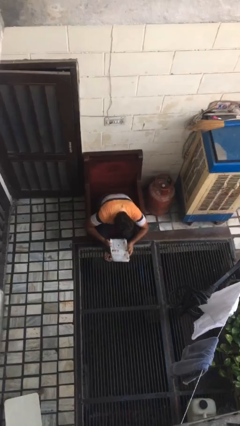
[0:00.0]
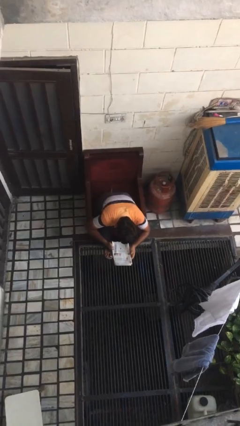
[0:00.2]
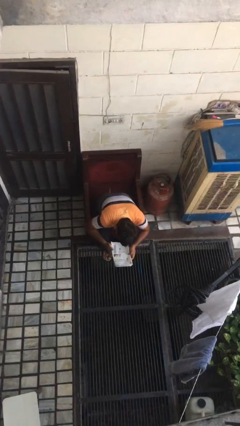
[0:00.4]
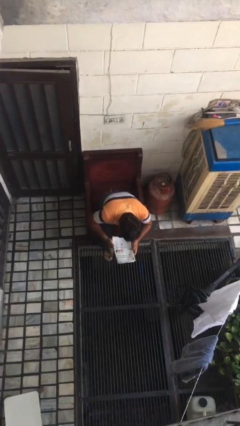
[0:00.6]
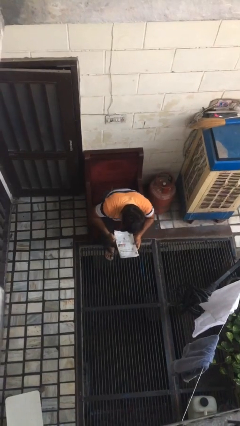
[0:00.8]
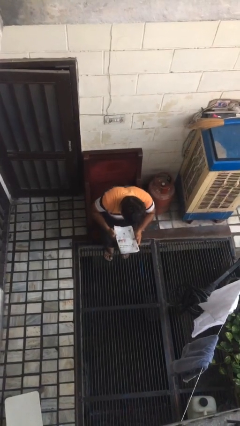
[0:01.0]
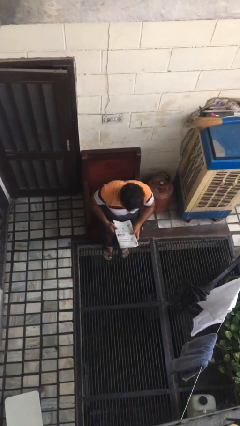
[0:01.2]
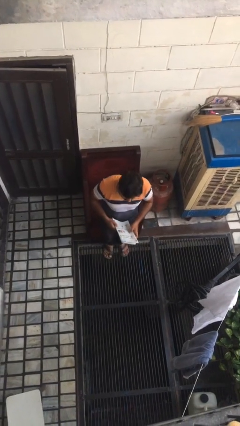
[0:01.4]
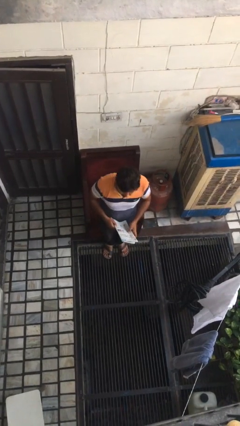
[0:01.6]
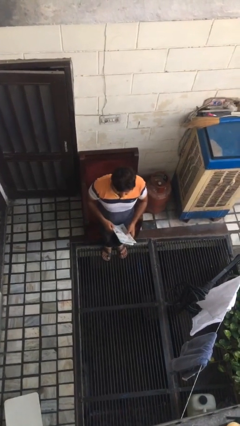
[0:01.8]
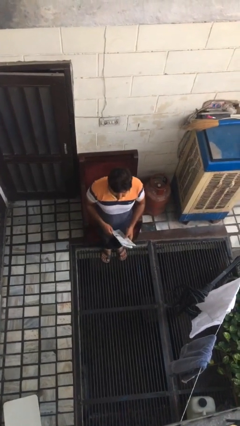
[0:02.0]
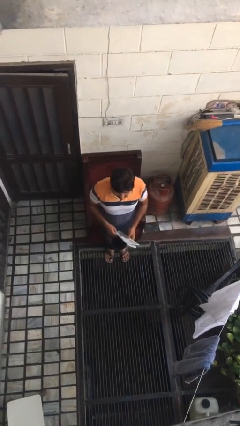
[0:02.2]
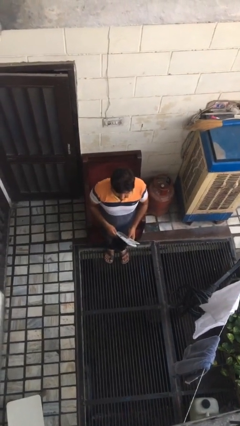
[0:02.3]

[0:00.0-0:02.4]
person stands up

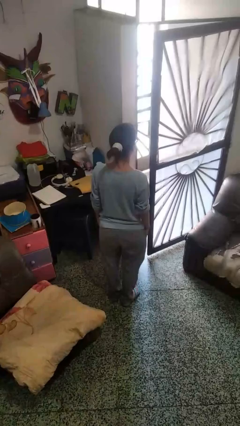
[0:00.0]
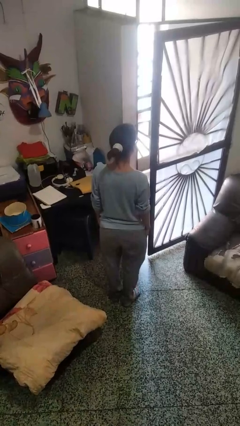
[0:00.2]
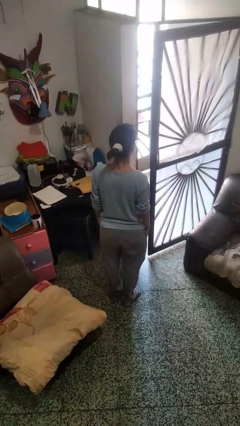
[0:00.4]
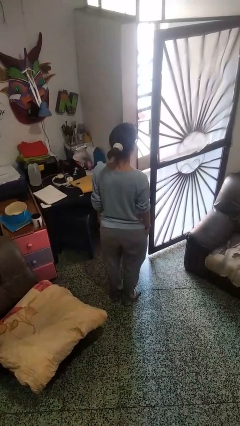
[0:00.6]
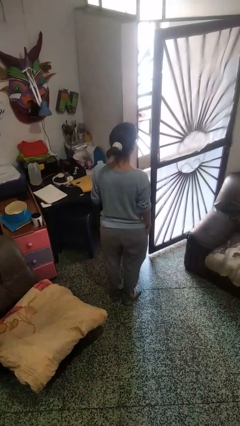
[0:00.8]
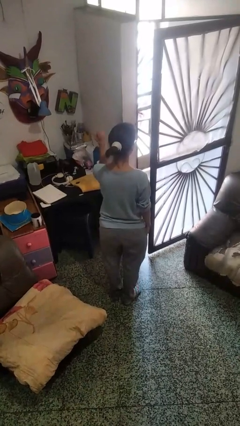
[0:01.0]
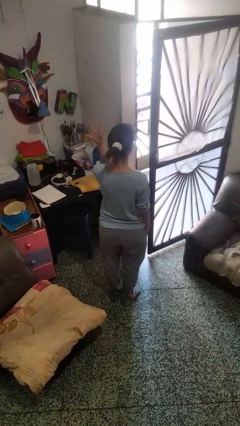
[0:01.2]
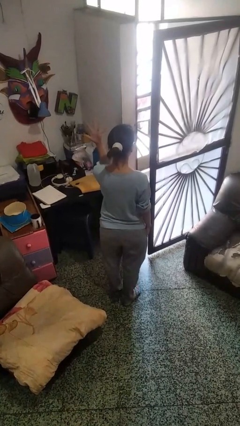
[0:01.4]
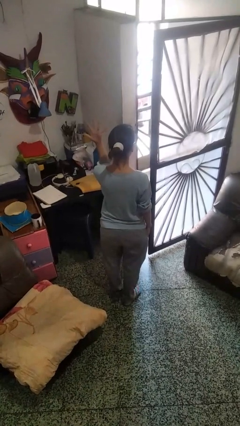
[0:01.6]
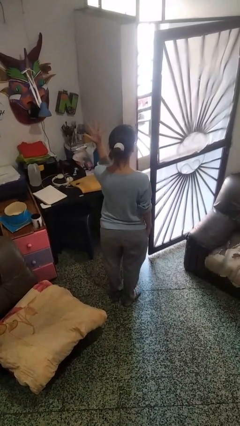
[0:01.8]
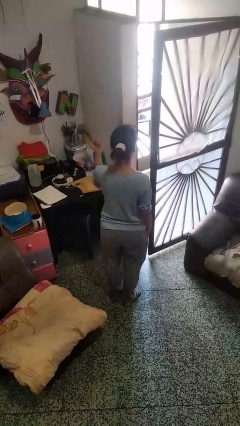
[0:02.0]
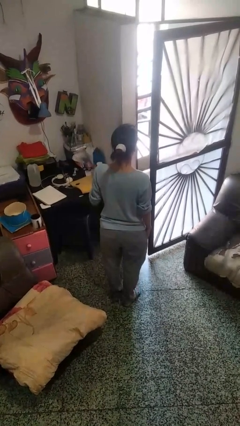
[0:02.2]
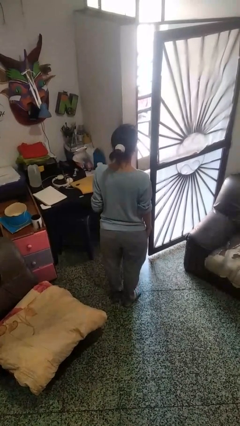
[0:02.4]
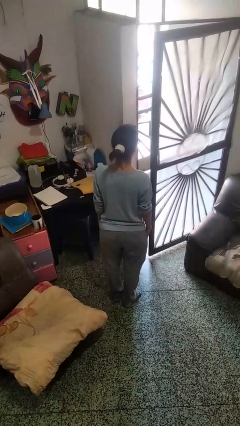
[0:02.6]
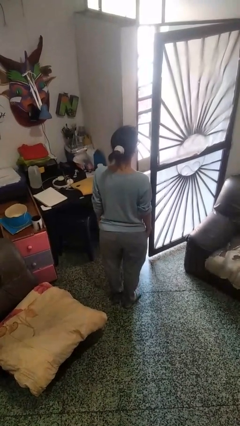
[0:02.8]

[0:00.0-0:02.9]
person gestures number five

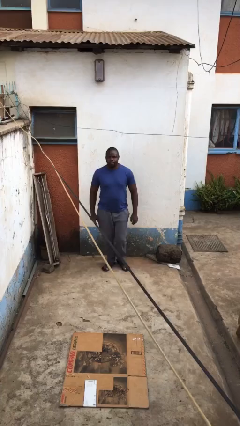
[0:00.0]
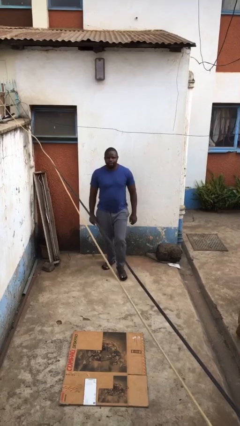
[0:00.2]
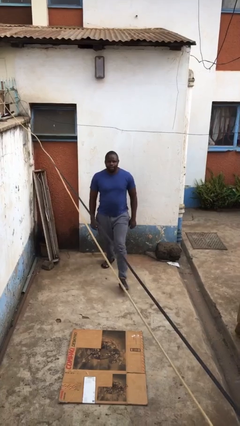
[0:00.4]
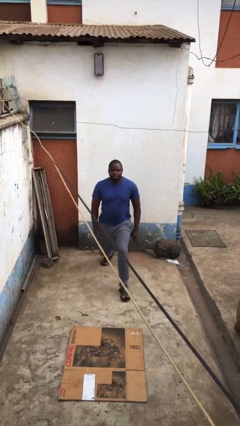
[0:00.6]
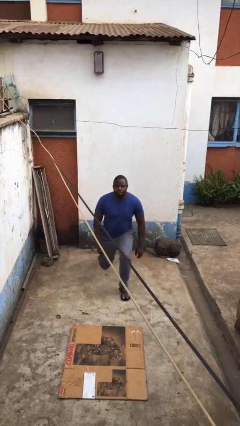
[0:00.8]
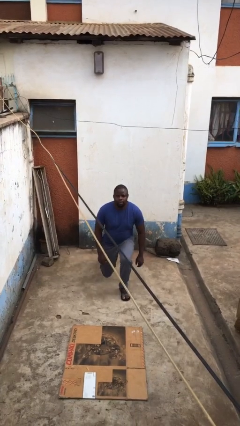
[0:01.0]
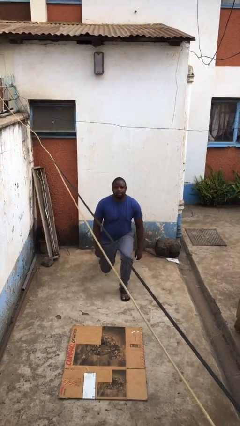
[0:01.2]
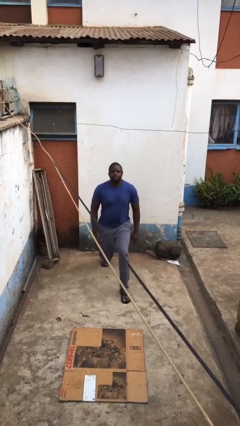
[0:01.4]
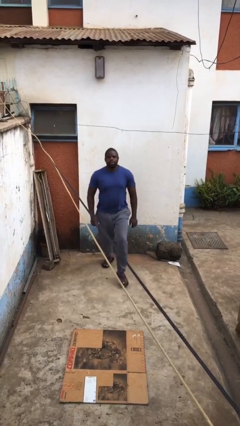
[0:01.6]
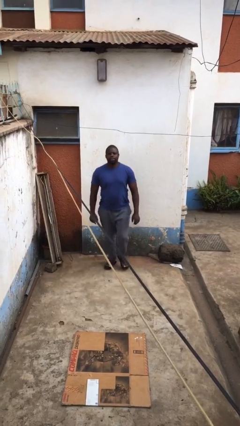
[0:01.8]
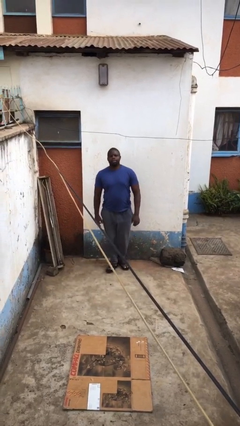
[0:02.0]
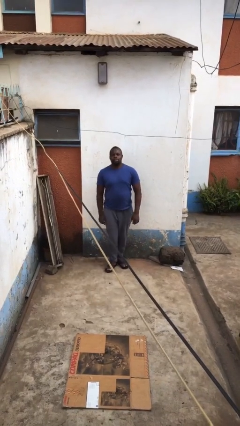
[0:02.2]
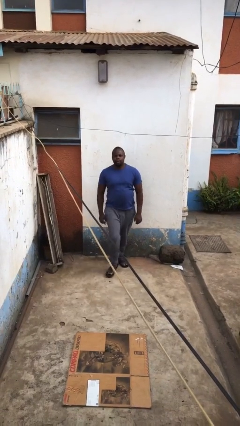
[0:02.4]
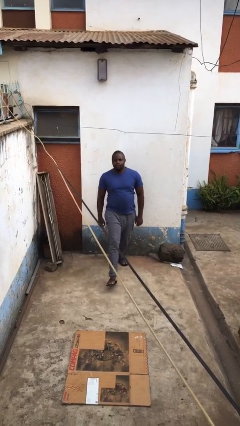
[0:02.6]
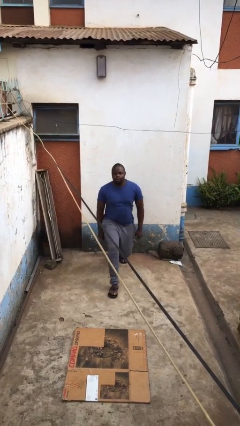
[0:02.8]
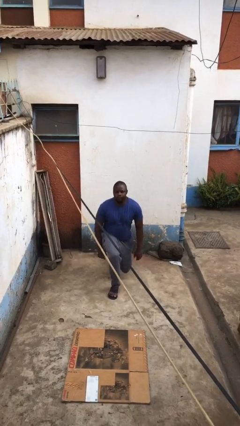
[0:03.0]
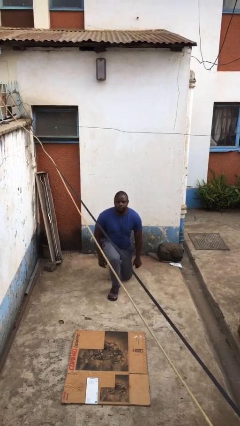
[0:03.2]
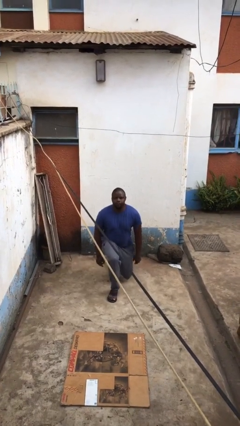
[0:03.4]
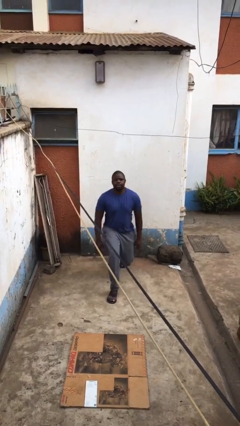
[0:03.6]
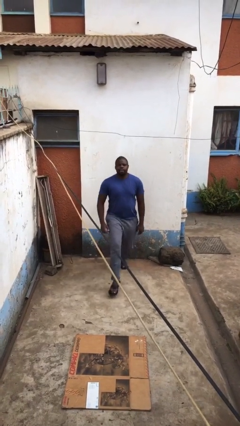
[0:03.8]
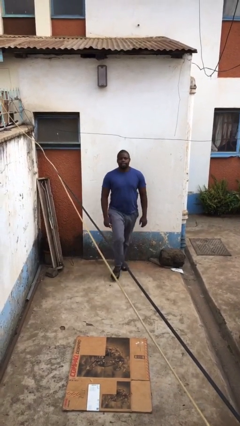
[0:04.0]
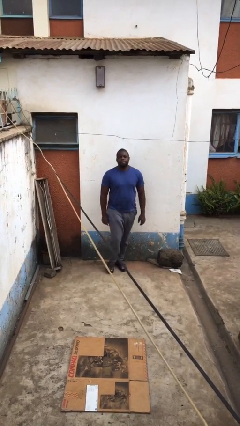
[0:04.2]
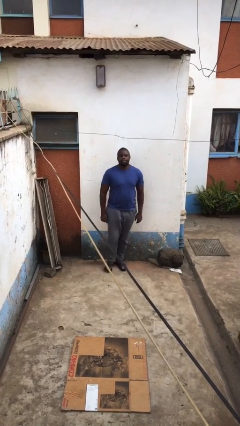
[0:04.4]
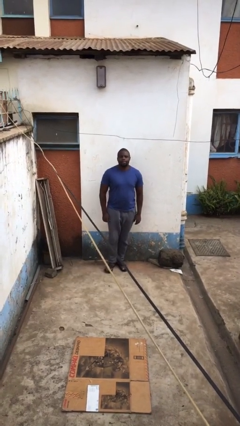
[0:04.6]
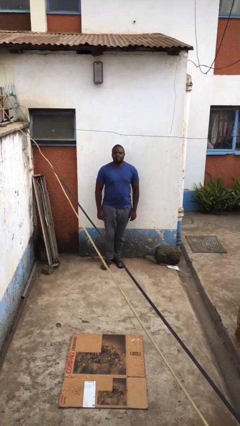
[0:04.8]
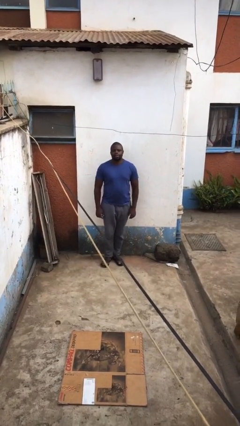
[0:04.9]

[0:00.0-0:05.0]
person exercises with lunges

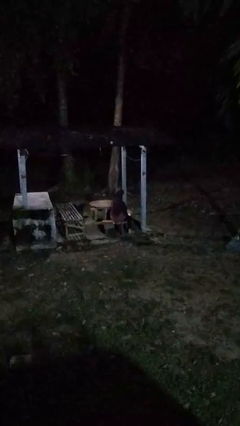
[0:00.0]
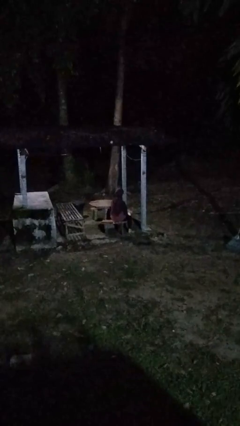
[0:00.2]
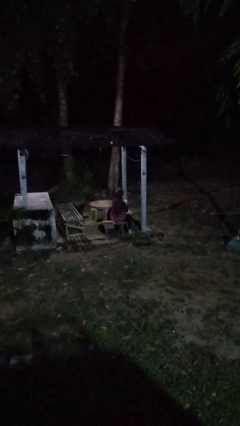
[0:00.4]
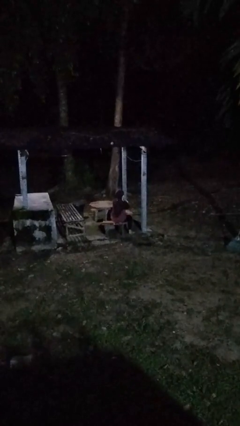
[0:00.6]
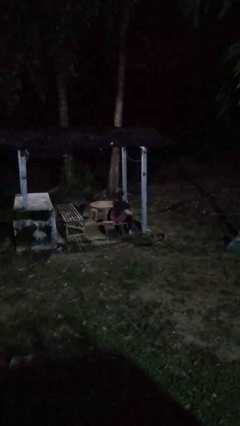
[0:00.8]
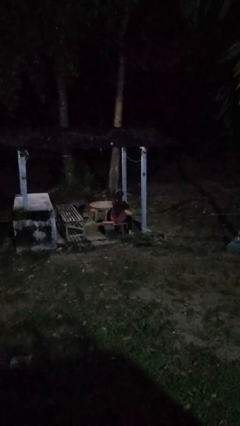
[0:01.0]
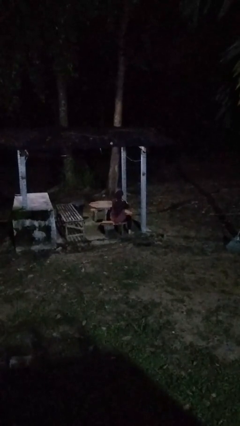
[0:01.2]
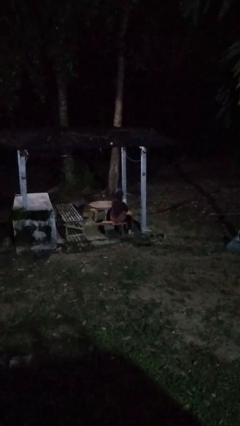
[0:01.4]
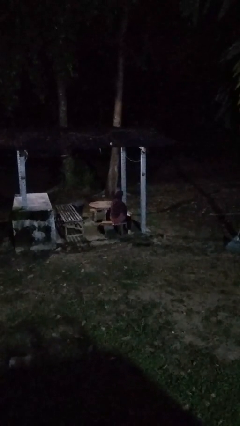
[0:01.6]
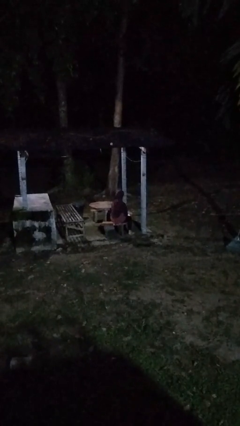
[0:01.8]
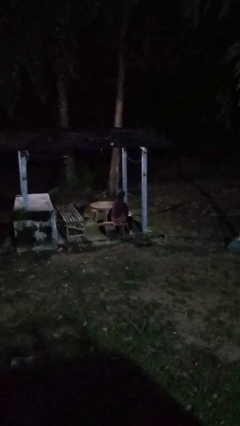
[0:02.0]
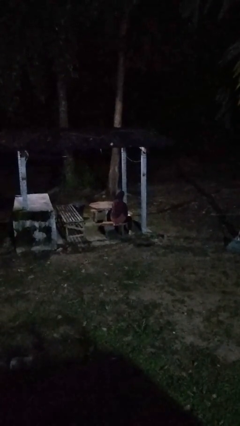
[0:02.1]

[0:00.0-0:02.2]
person blows nose

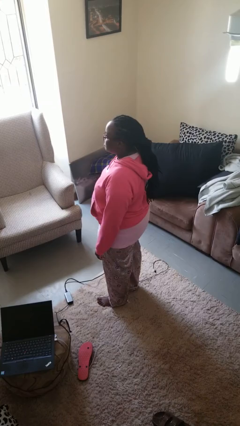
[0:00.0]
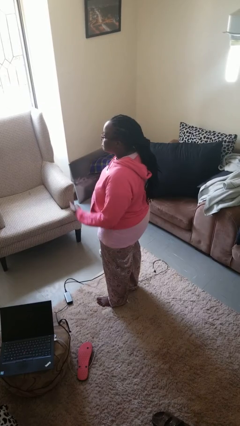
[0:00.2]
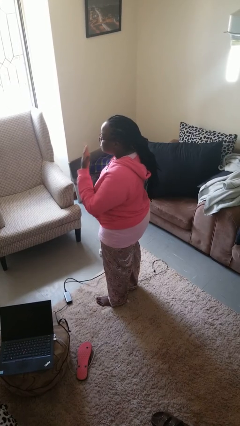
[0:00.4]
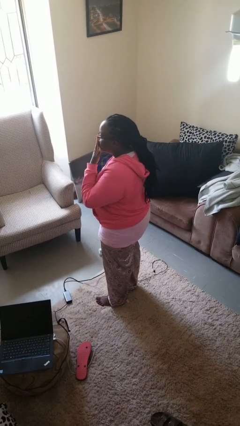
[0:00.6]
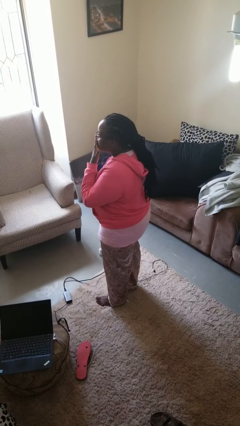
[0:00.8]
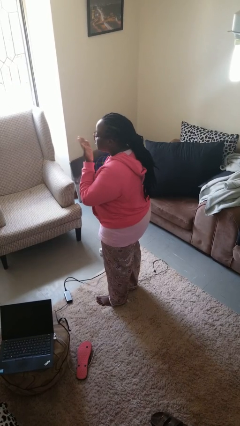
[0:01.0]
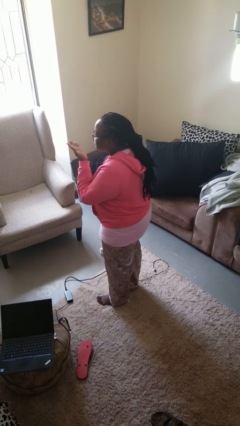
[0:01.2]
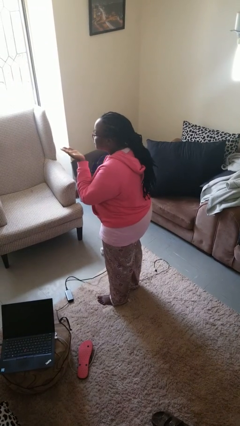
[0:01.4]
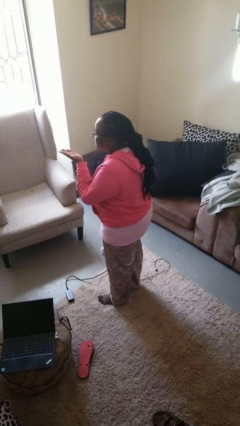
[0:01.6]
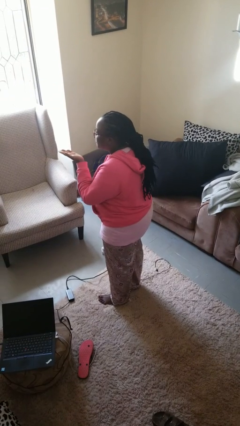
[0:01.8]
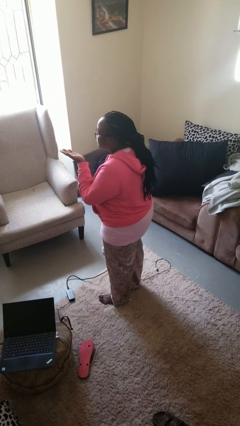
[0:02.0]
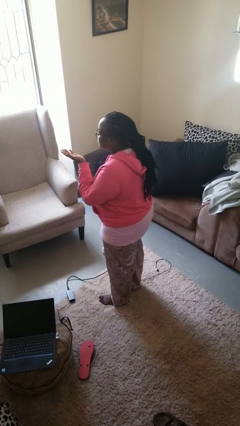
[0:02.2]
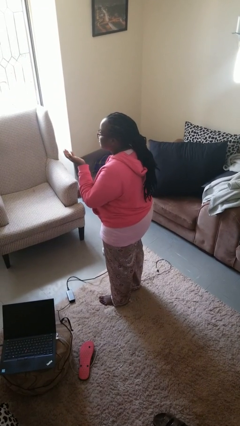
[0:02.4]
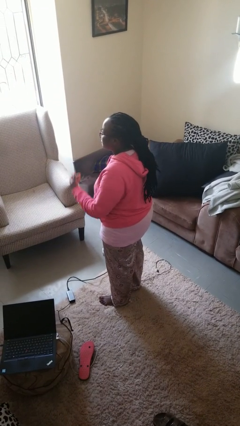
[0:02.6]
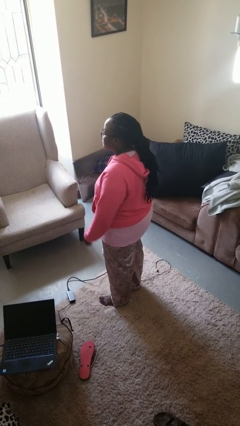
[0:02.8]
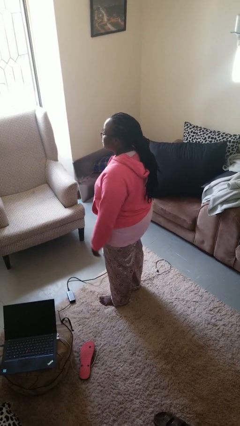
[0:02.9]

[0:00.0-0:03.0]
person gestures blow kiss

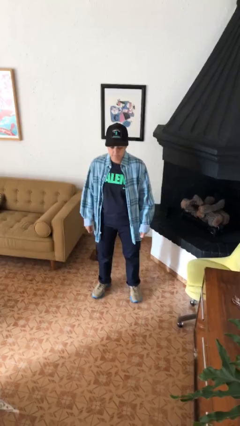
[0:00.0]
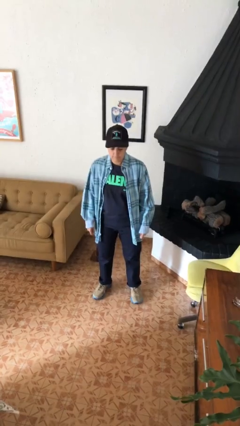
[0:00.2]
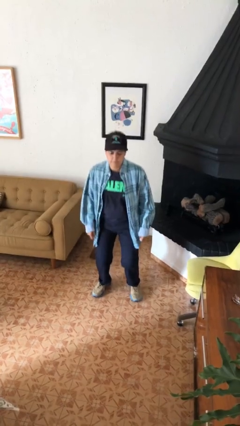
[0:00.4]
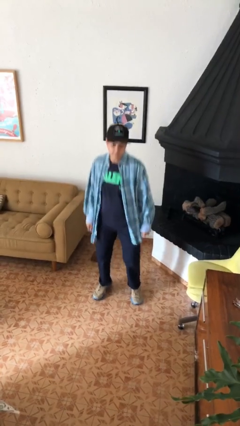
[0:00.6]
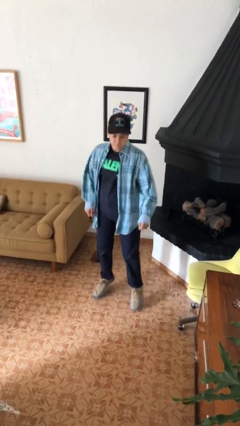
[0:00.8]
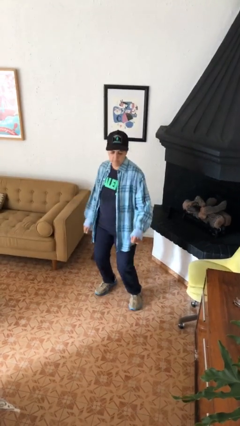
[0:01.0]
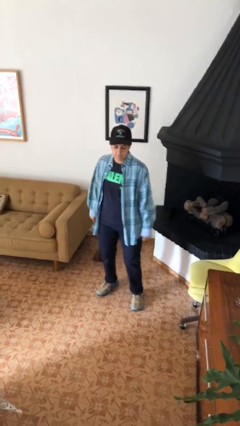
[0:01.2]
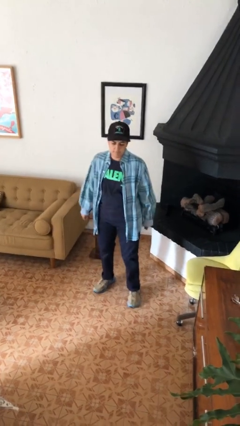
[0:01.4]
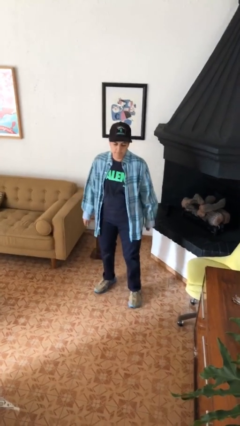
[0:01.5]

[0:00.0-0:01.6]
person jumps

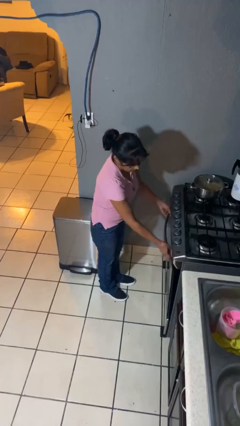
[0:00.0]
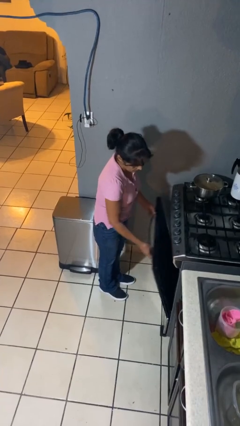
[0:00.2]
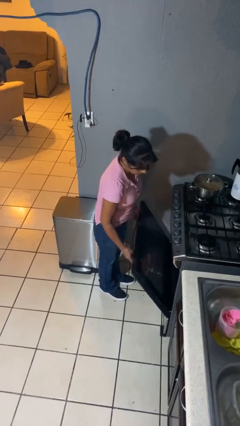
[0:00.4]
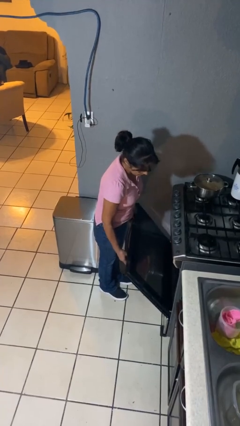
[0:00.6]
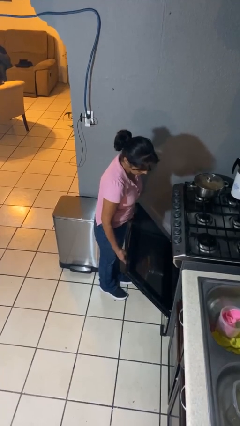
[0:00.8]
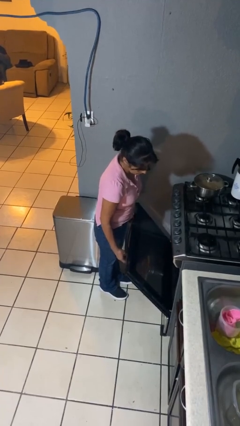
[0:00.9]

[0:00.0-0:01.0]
person opens oven door
